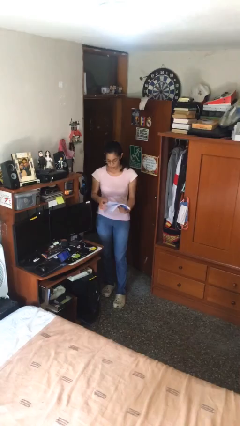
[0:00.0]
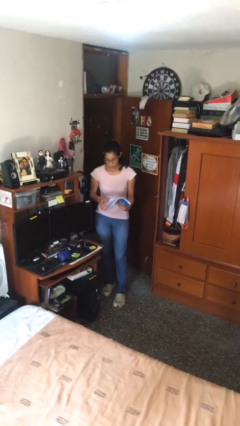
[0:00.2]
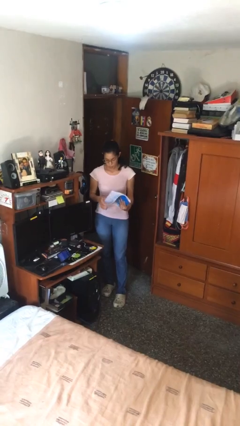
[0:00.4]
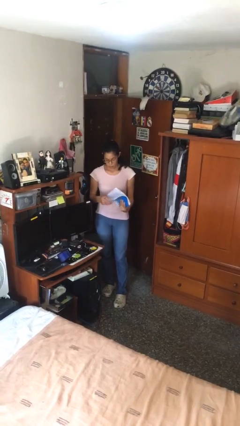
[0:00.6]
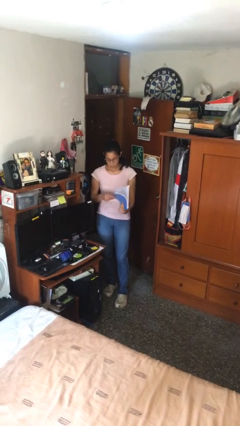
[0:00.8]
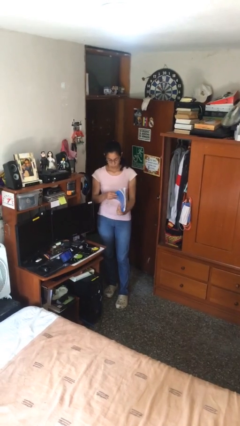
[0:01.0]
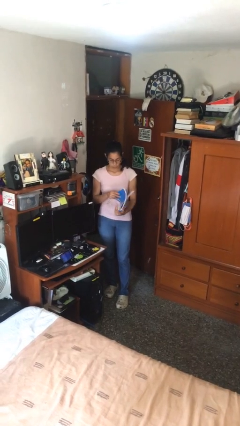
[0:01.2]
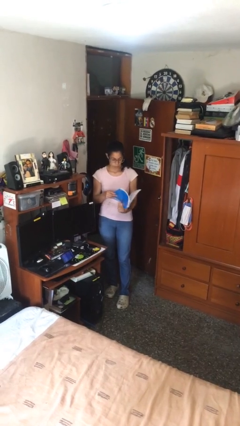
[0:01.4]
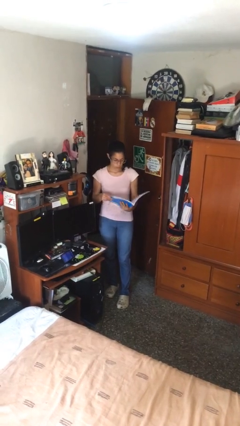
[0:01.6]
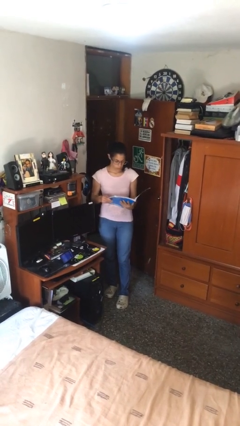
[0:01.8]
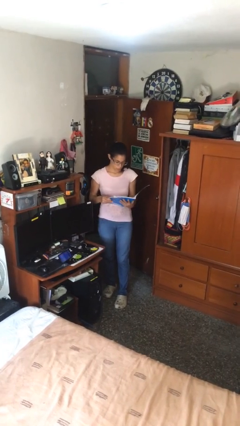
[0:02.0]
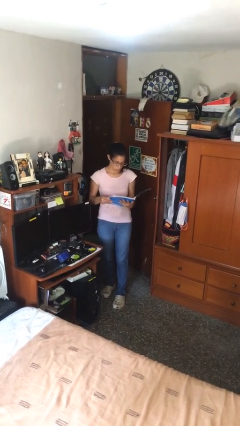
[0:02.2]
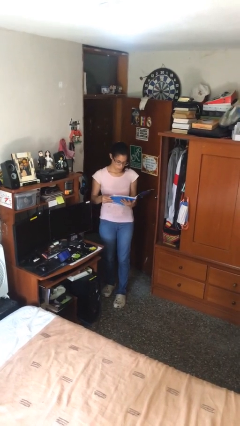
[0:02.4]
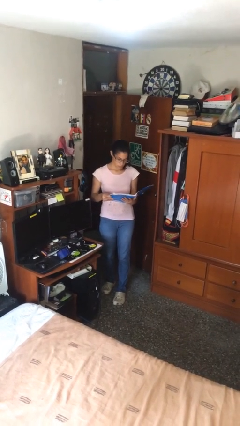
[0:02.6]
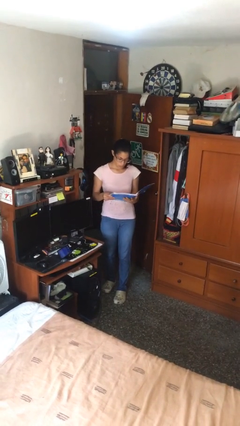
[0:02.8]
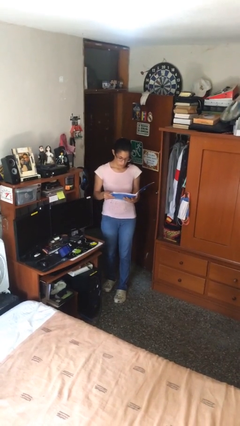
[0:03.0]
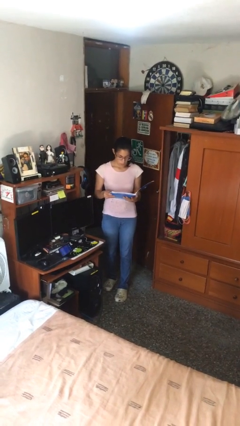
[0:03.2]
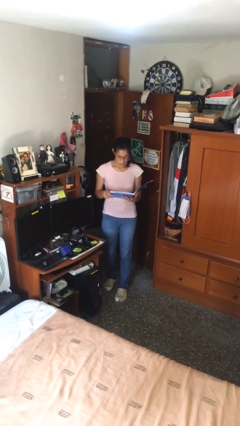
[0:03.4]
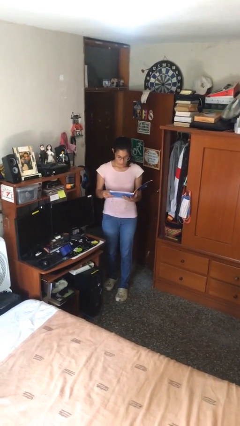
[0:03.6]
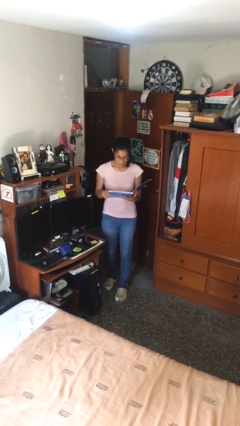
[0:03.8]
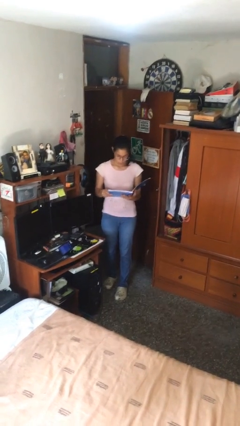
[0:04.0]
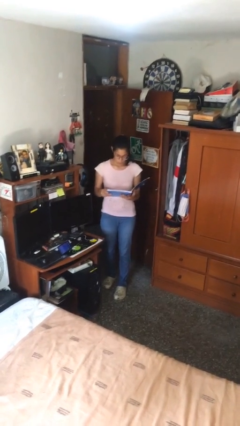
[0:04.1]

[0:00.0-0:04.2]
person reads document

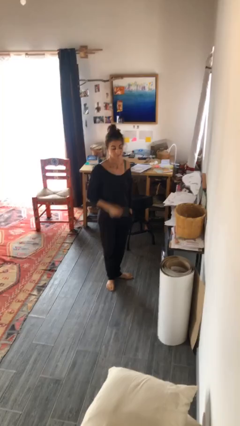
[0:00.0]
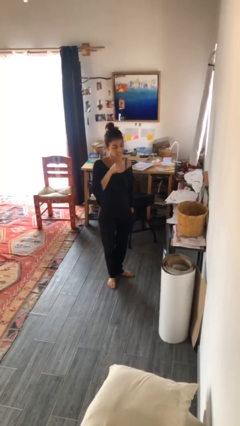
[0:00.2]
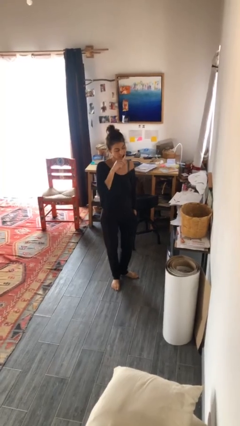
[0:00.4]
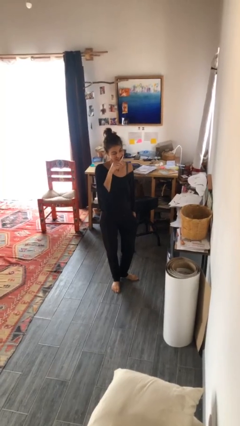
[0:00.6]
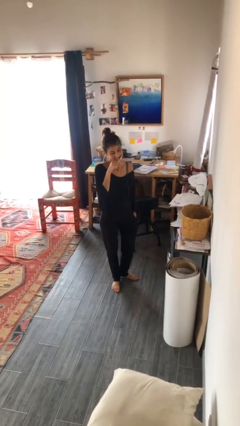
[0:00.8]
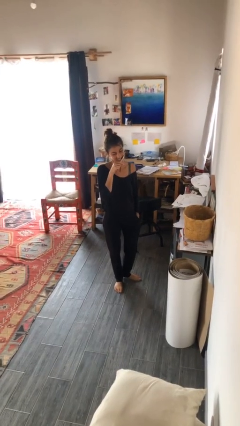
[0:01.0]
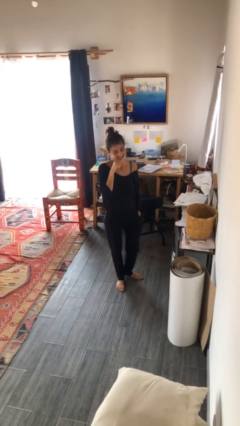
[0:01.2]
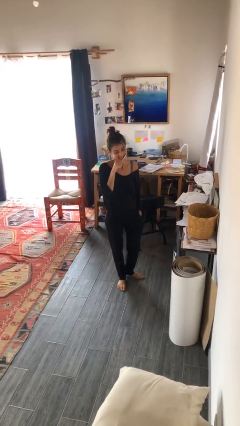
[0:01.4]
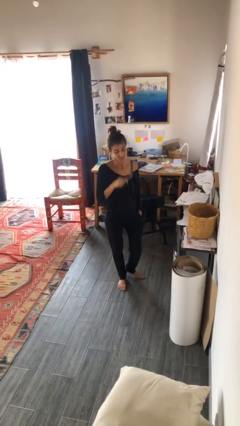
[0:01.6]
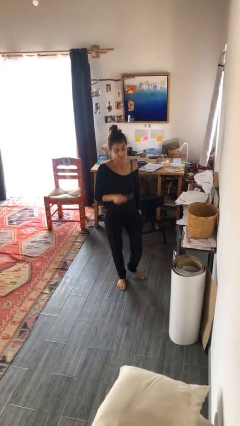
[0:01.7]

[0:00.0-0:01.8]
person brushes teeth

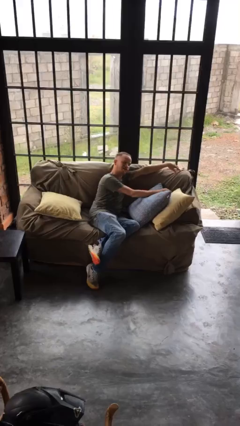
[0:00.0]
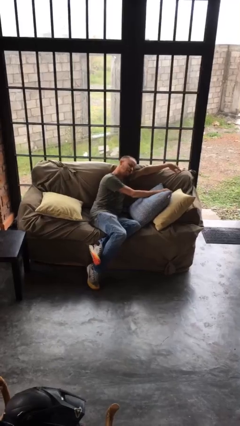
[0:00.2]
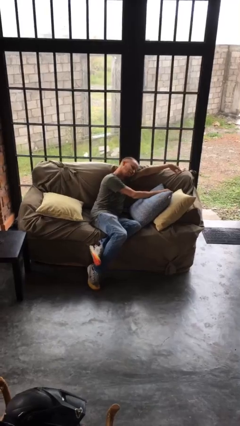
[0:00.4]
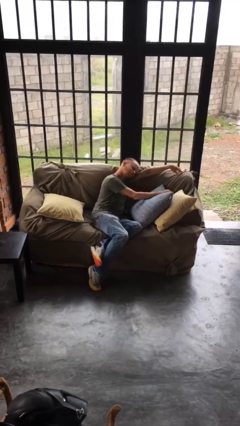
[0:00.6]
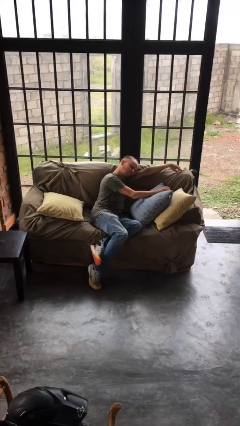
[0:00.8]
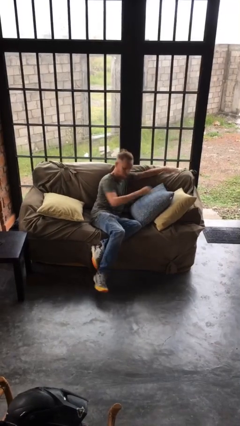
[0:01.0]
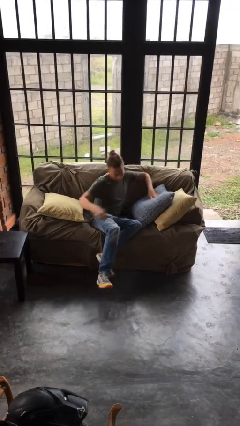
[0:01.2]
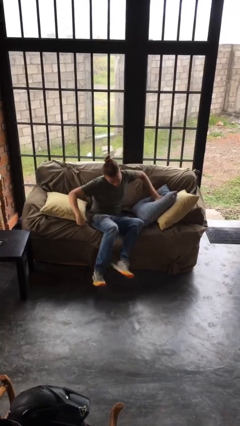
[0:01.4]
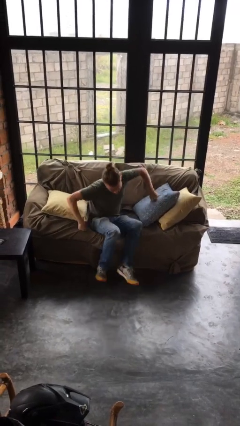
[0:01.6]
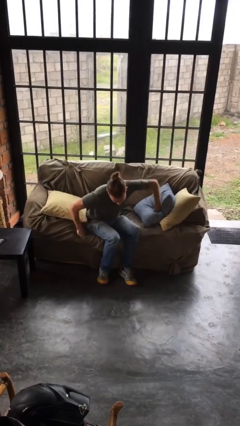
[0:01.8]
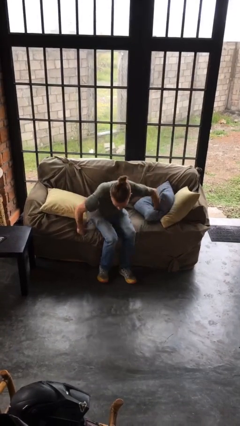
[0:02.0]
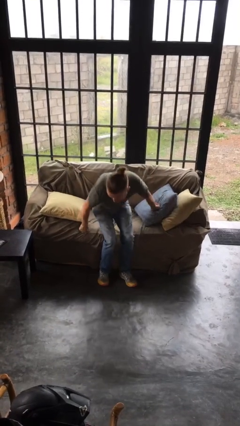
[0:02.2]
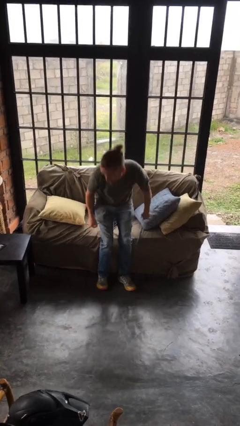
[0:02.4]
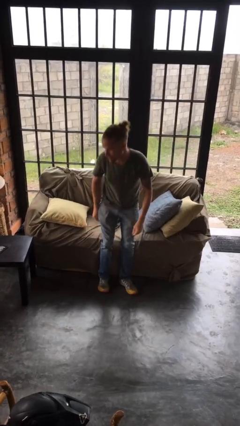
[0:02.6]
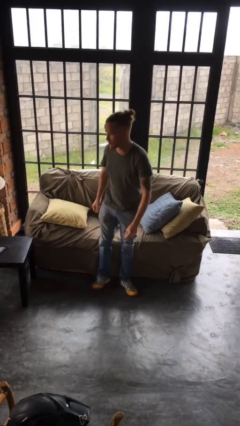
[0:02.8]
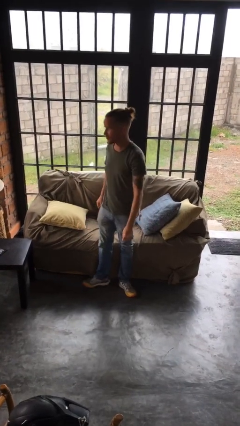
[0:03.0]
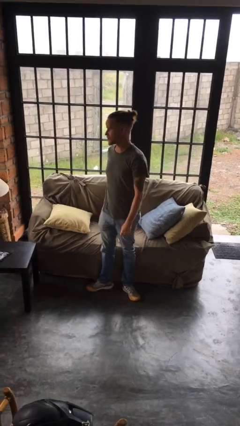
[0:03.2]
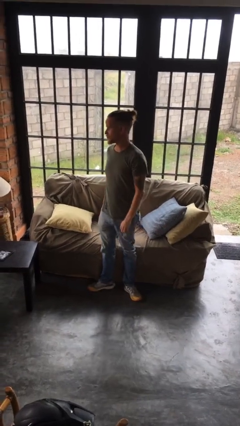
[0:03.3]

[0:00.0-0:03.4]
person stands up

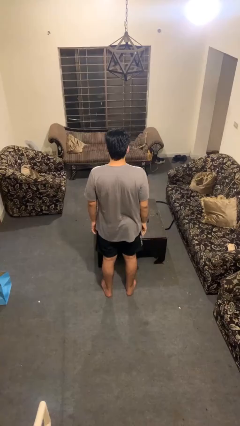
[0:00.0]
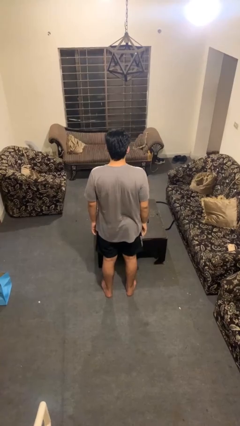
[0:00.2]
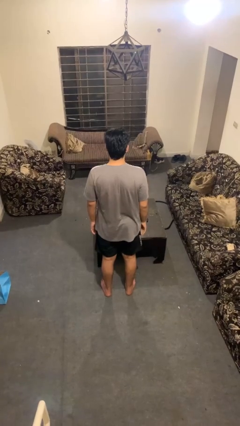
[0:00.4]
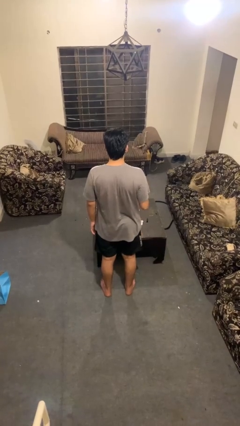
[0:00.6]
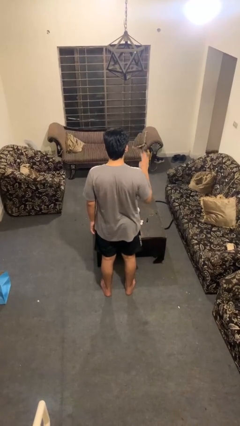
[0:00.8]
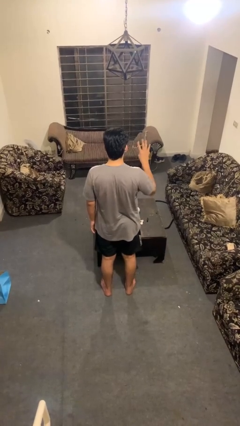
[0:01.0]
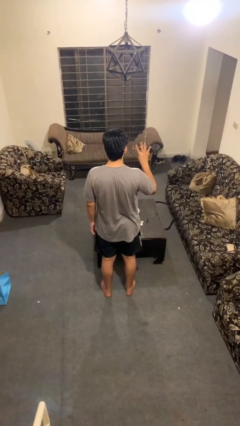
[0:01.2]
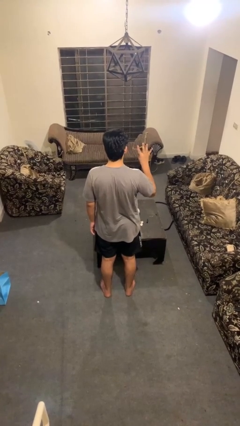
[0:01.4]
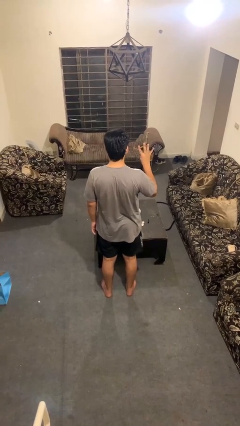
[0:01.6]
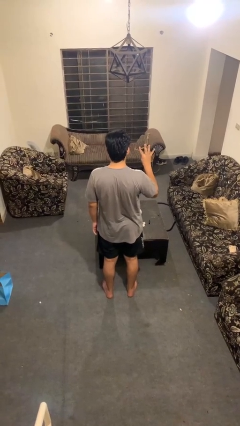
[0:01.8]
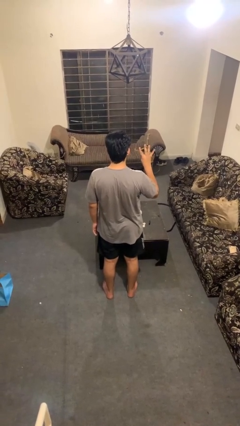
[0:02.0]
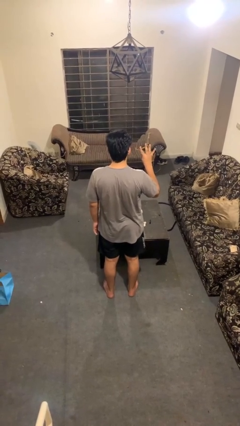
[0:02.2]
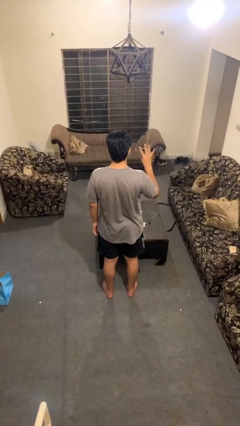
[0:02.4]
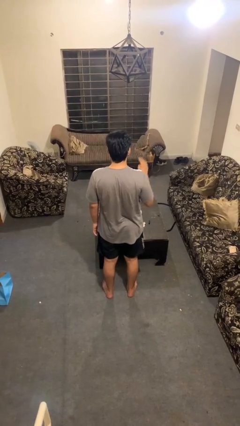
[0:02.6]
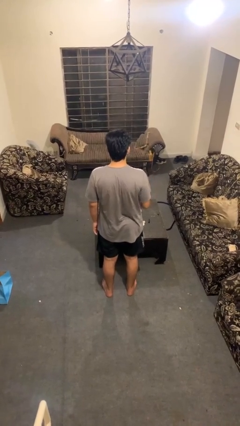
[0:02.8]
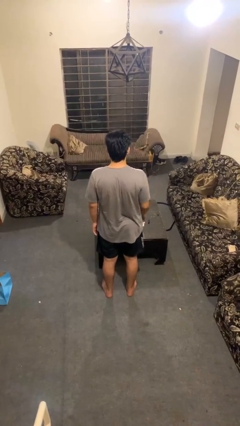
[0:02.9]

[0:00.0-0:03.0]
person gestures number four

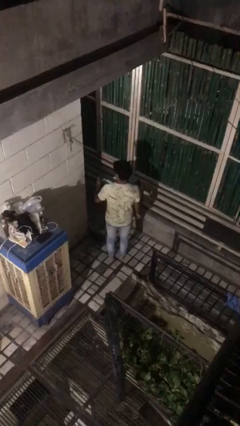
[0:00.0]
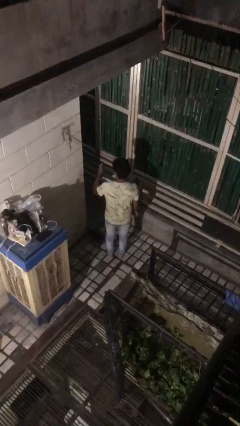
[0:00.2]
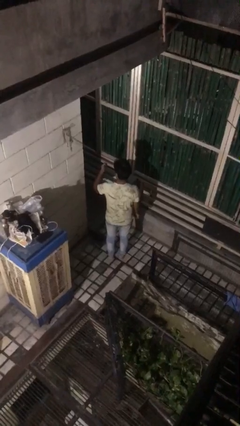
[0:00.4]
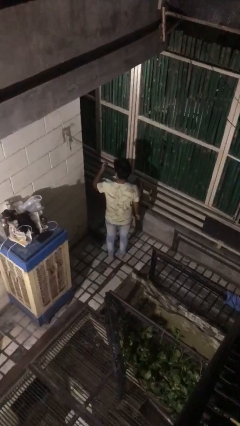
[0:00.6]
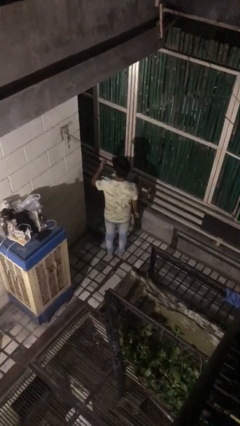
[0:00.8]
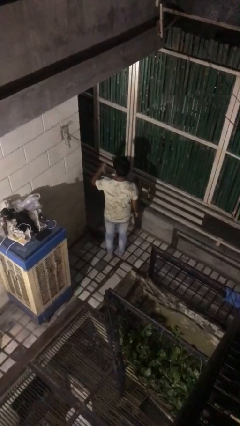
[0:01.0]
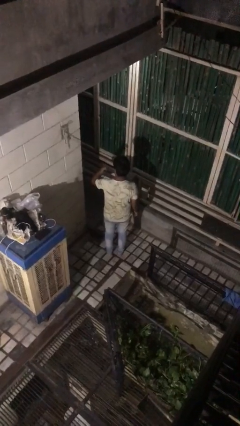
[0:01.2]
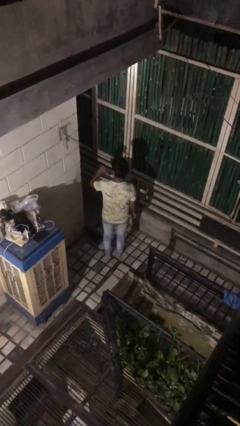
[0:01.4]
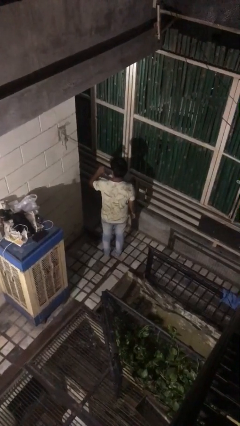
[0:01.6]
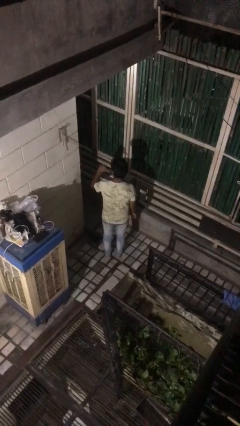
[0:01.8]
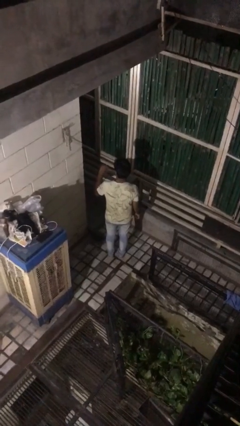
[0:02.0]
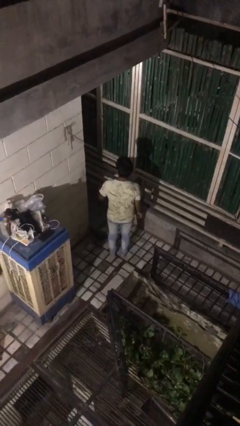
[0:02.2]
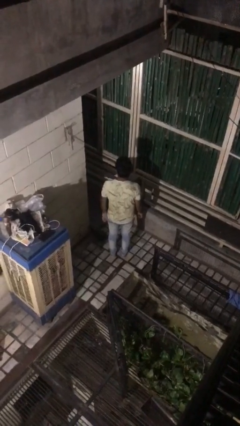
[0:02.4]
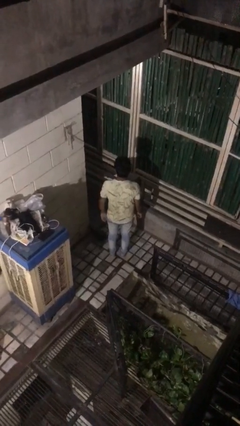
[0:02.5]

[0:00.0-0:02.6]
person gestures behind me

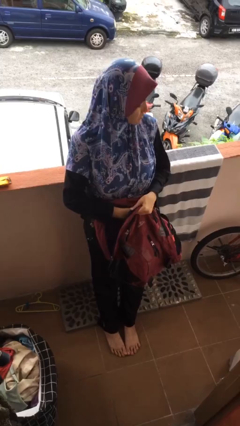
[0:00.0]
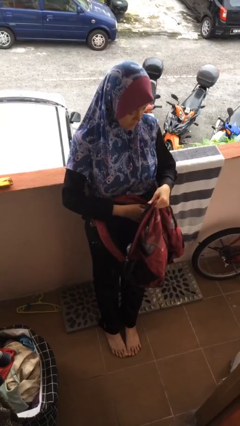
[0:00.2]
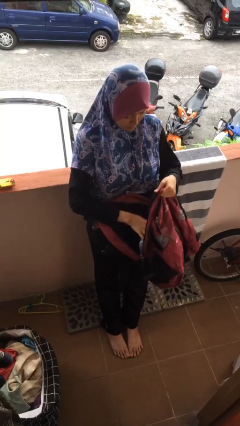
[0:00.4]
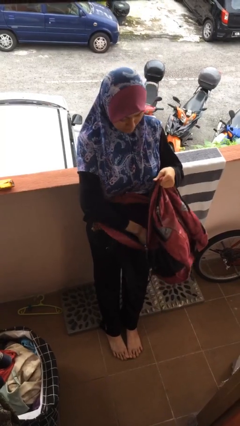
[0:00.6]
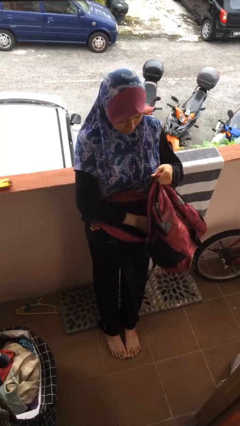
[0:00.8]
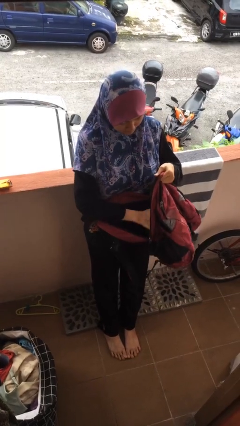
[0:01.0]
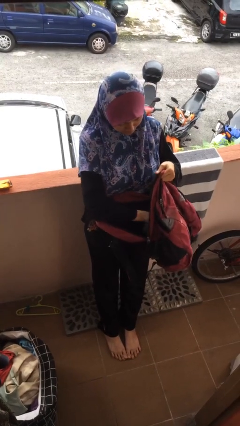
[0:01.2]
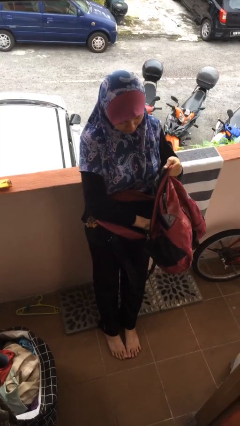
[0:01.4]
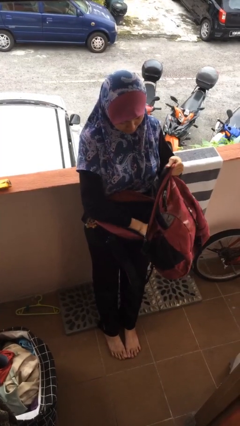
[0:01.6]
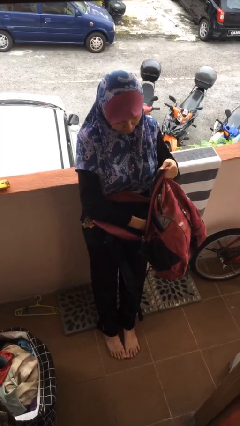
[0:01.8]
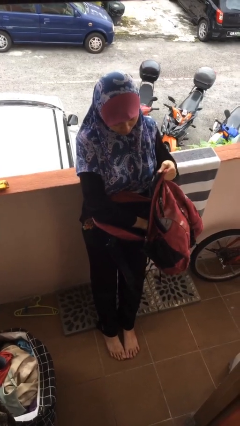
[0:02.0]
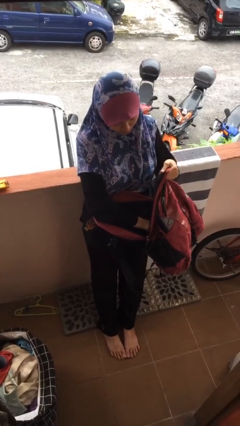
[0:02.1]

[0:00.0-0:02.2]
person searches in backpack

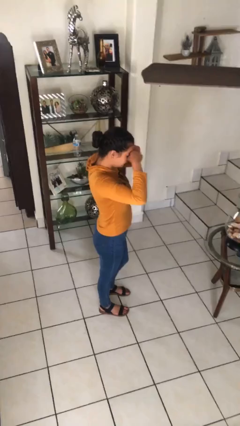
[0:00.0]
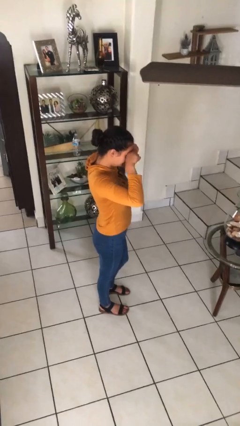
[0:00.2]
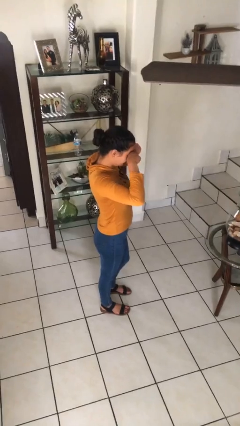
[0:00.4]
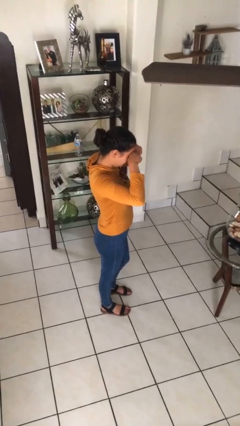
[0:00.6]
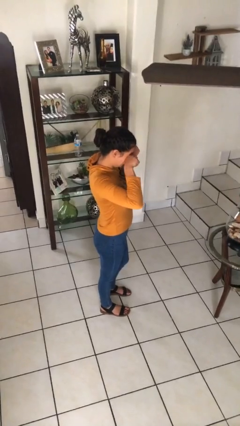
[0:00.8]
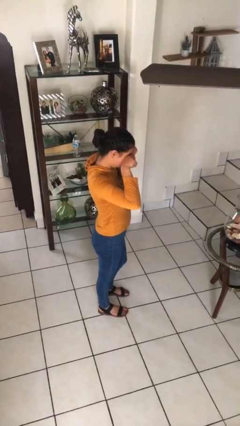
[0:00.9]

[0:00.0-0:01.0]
person rubs eyes
